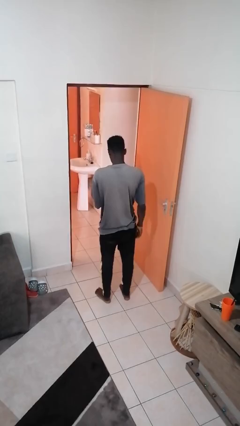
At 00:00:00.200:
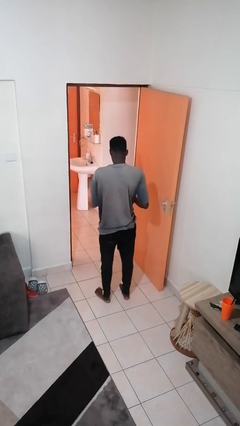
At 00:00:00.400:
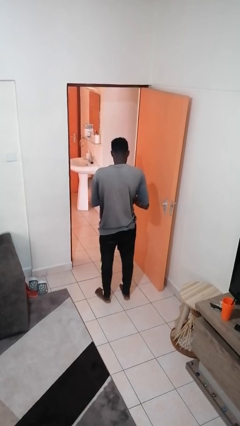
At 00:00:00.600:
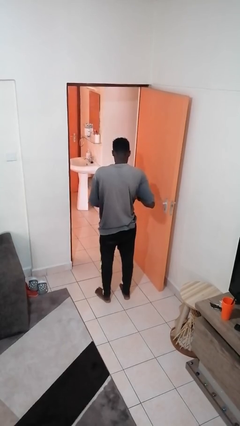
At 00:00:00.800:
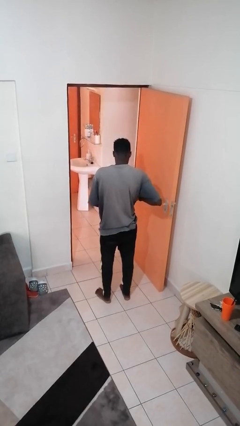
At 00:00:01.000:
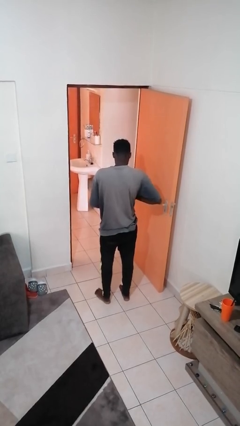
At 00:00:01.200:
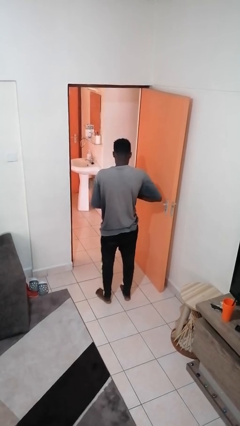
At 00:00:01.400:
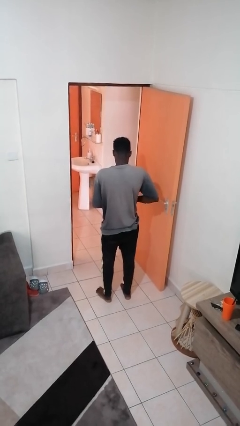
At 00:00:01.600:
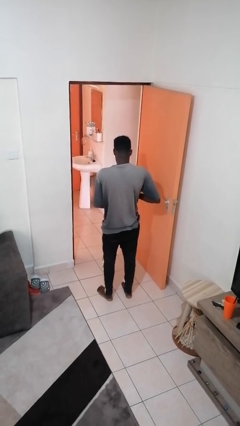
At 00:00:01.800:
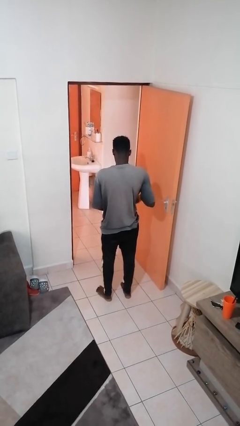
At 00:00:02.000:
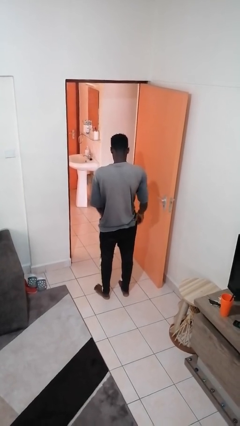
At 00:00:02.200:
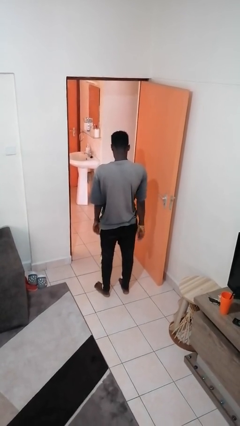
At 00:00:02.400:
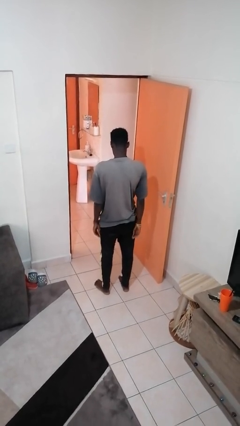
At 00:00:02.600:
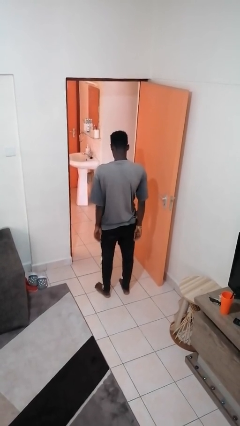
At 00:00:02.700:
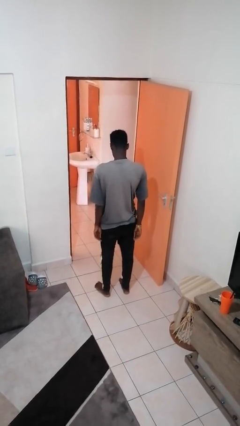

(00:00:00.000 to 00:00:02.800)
person puts phone into pocket

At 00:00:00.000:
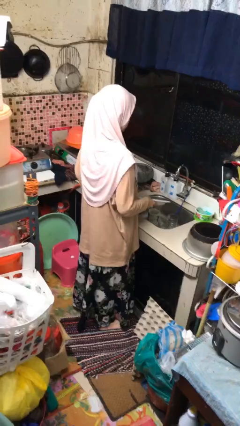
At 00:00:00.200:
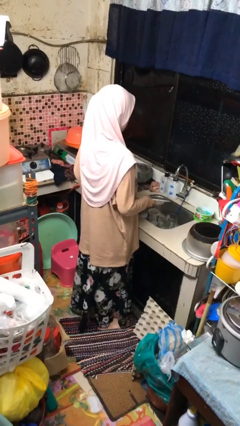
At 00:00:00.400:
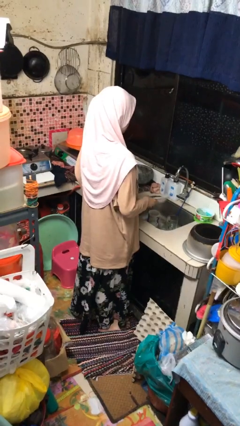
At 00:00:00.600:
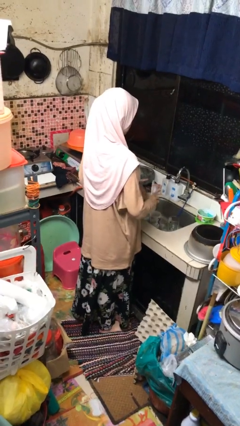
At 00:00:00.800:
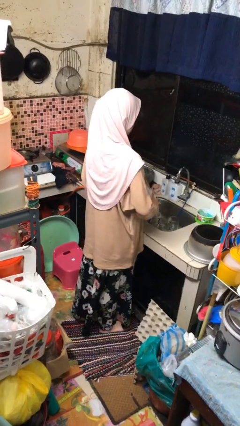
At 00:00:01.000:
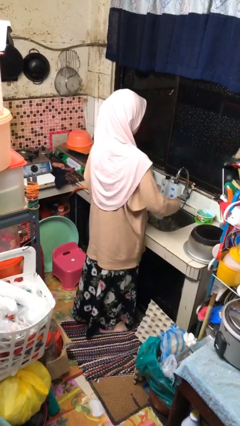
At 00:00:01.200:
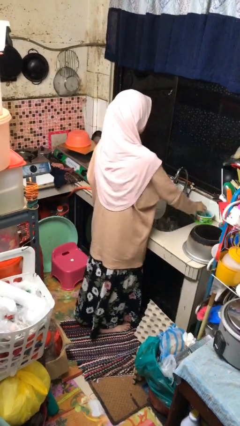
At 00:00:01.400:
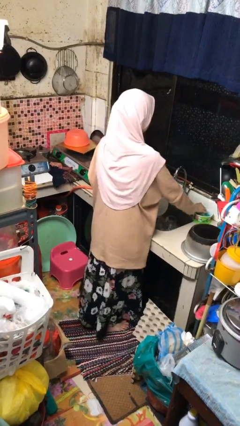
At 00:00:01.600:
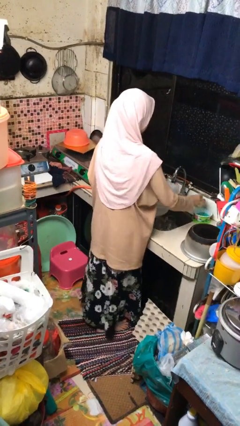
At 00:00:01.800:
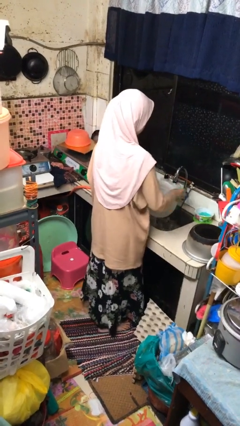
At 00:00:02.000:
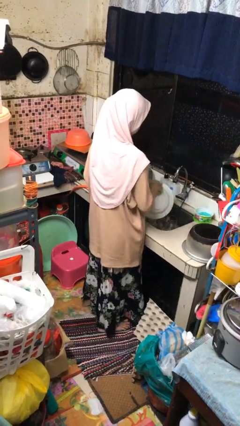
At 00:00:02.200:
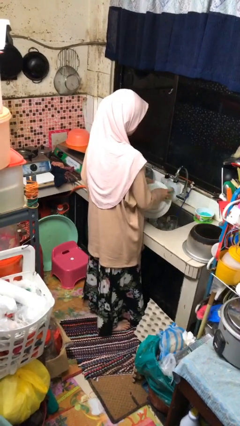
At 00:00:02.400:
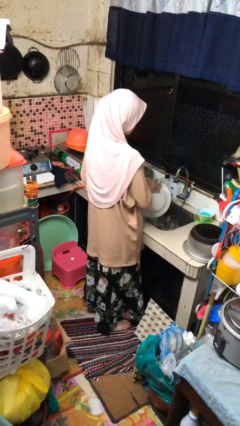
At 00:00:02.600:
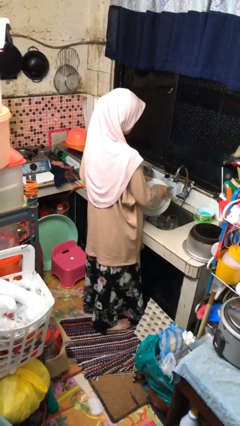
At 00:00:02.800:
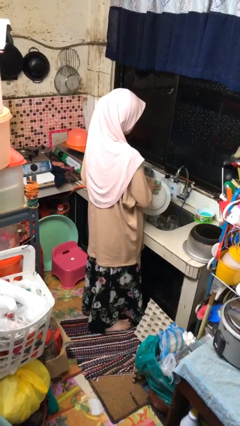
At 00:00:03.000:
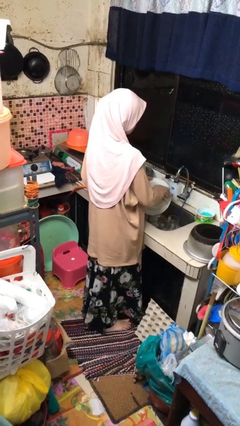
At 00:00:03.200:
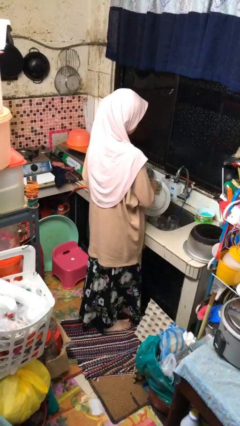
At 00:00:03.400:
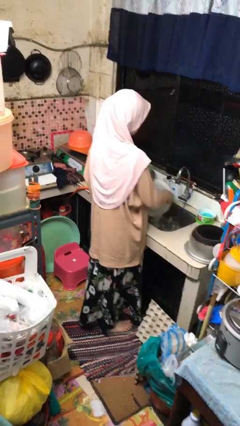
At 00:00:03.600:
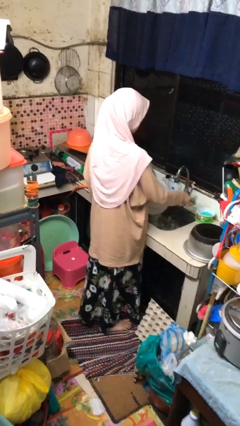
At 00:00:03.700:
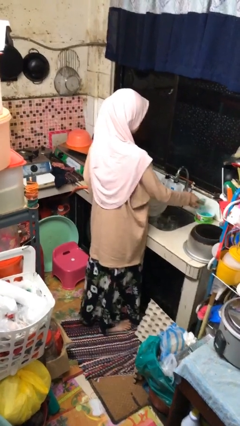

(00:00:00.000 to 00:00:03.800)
person washes dish

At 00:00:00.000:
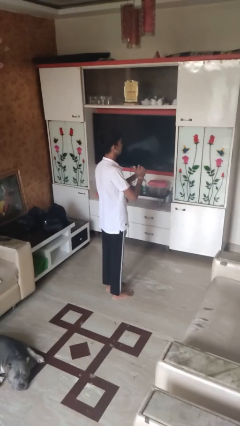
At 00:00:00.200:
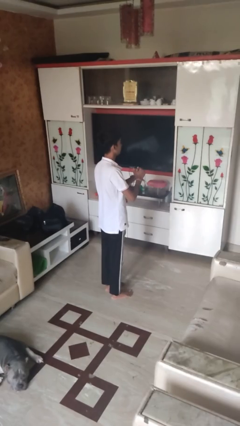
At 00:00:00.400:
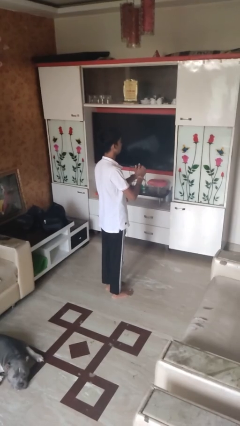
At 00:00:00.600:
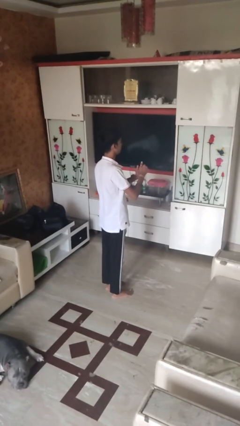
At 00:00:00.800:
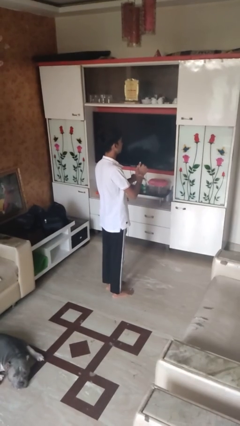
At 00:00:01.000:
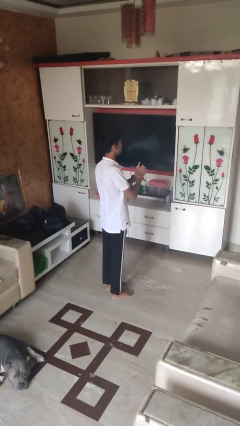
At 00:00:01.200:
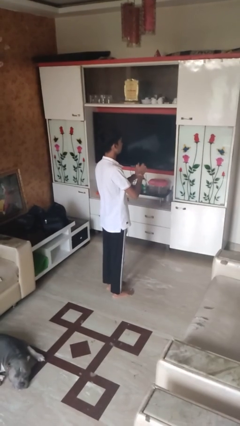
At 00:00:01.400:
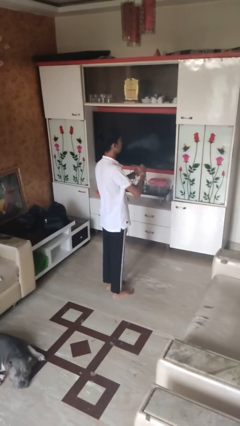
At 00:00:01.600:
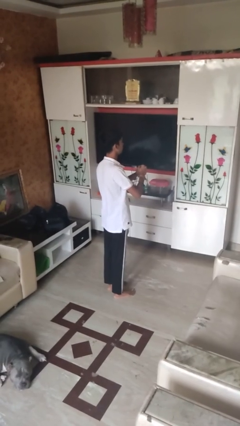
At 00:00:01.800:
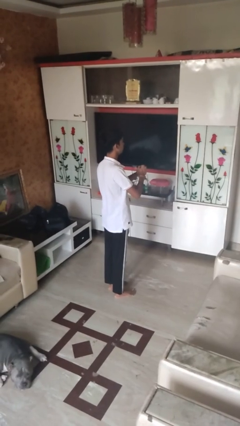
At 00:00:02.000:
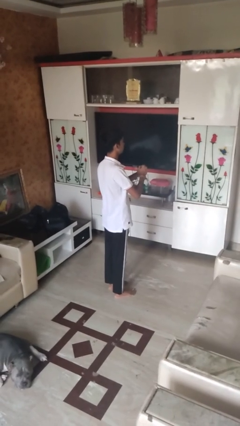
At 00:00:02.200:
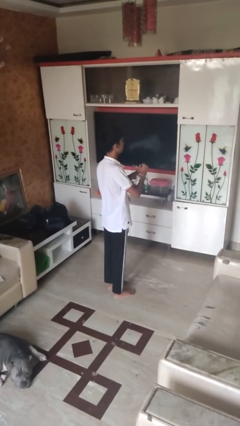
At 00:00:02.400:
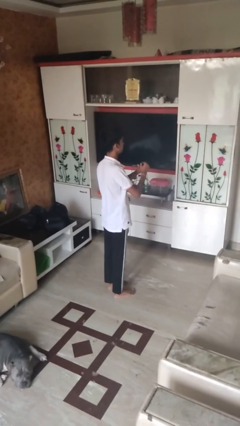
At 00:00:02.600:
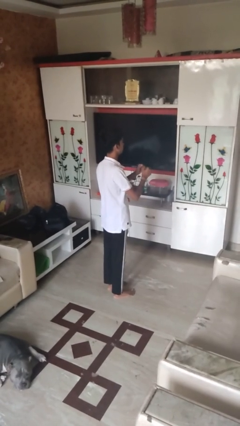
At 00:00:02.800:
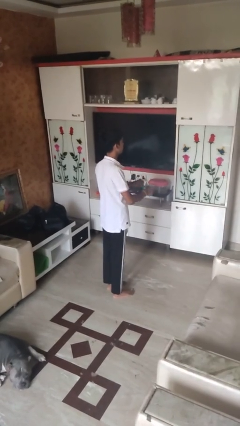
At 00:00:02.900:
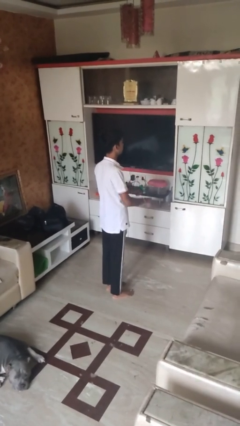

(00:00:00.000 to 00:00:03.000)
person cracks knuckles

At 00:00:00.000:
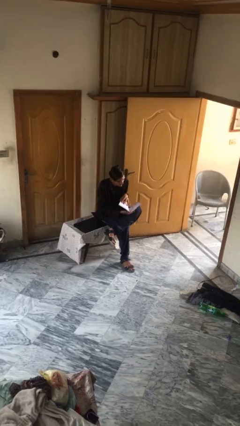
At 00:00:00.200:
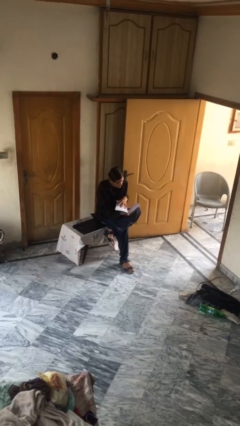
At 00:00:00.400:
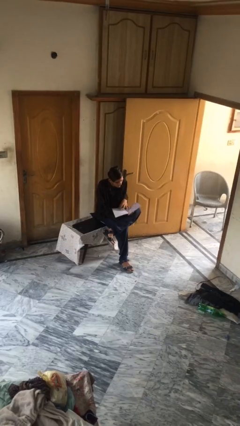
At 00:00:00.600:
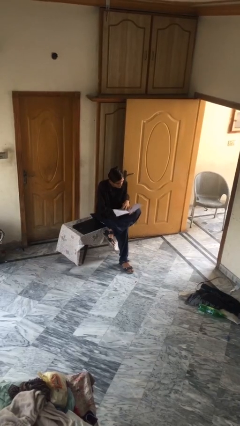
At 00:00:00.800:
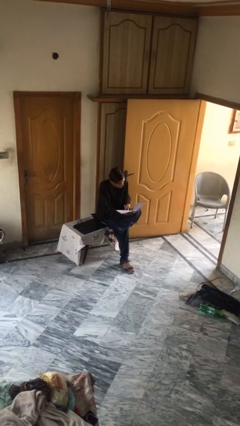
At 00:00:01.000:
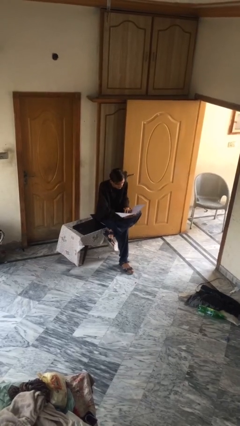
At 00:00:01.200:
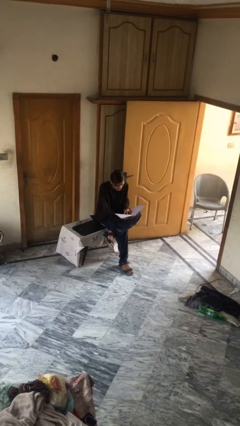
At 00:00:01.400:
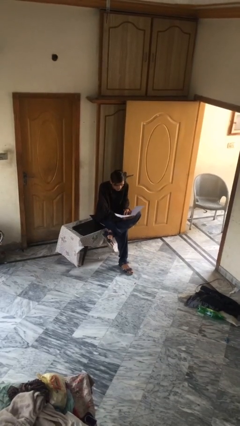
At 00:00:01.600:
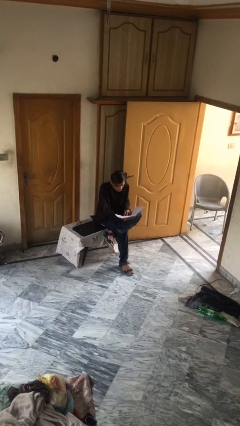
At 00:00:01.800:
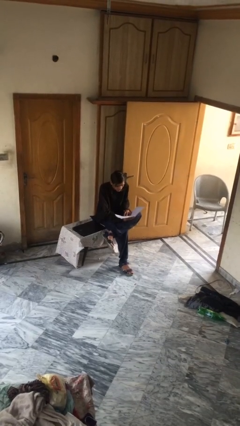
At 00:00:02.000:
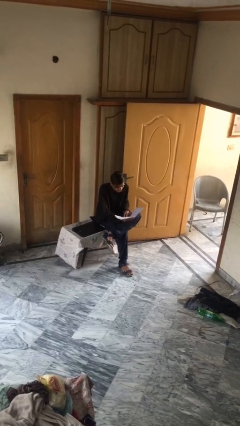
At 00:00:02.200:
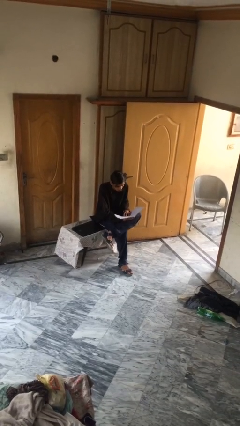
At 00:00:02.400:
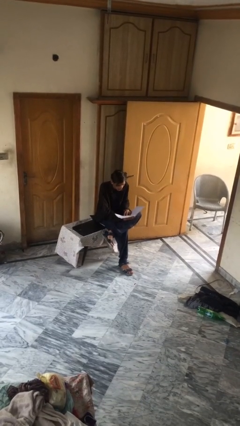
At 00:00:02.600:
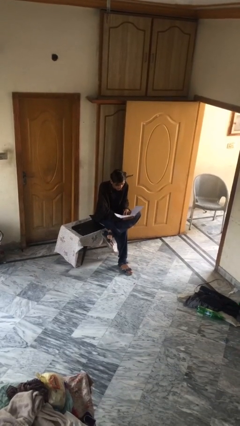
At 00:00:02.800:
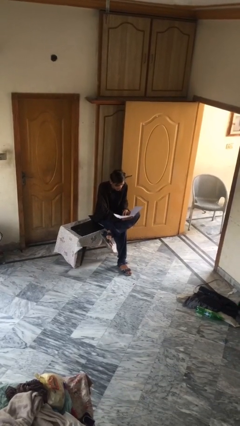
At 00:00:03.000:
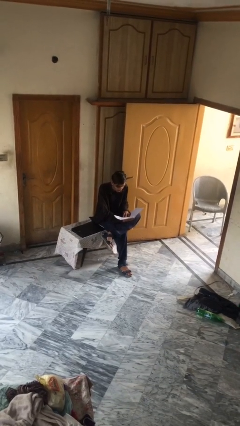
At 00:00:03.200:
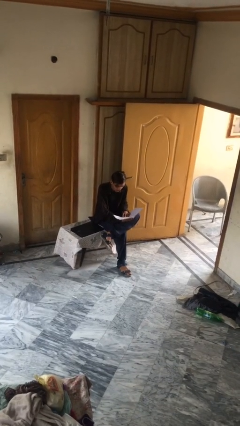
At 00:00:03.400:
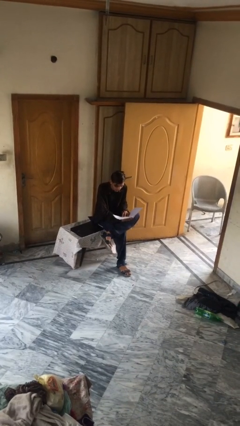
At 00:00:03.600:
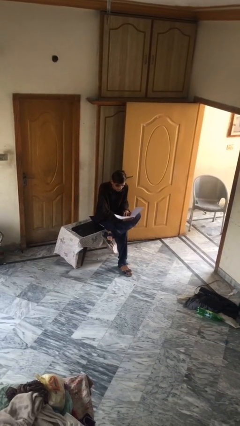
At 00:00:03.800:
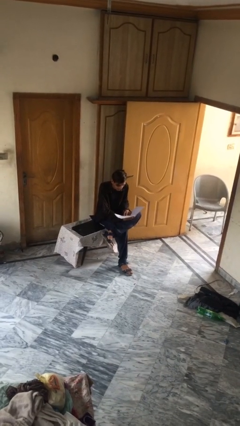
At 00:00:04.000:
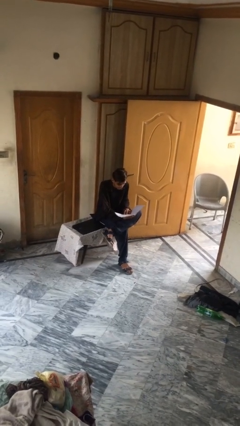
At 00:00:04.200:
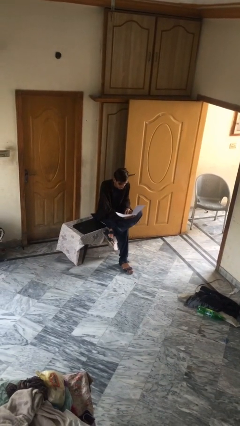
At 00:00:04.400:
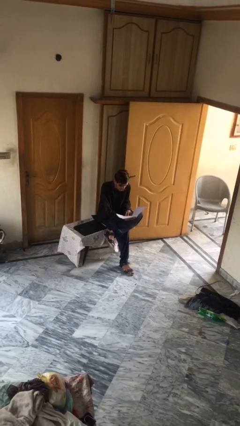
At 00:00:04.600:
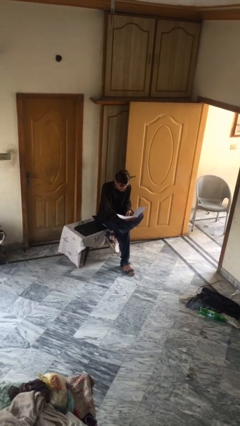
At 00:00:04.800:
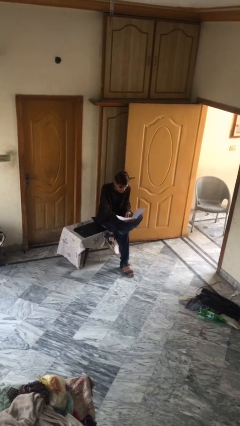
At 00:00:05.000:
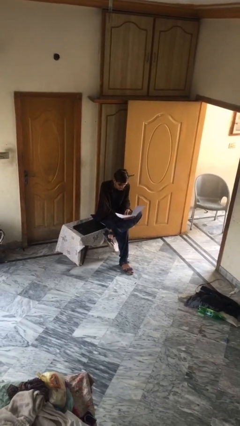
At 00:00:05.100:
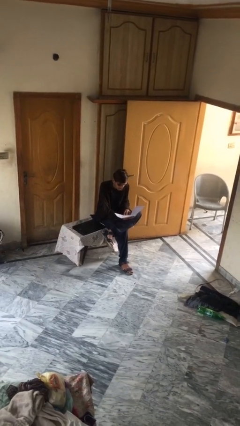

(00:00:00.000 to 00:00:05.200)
person reads document

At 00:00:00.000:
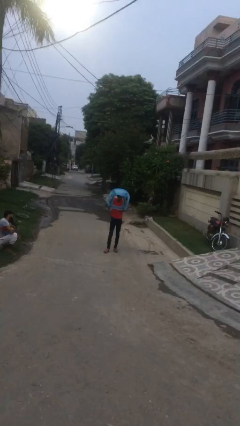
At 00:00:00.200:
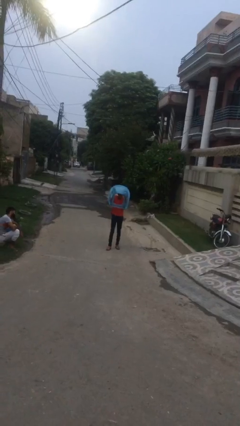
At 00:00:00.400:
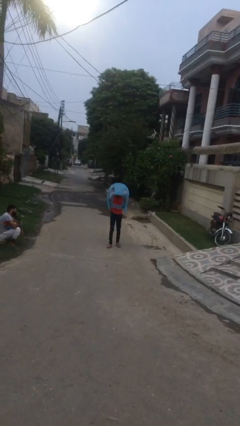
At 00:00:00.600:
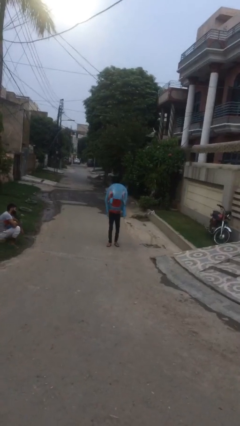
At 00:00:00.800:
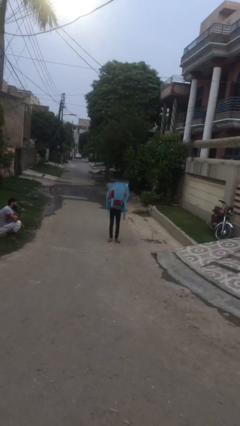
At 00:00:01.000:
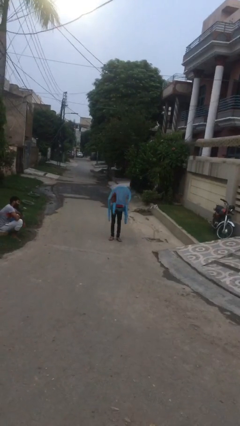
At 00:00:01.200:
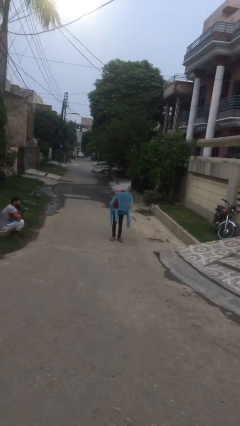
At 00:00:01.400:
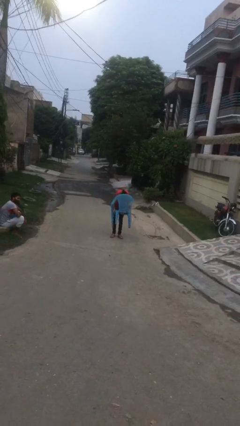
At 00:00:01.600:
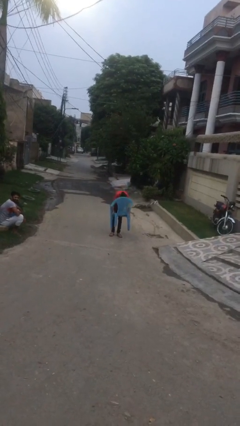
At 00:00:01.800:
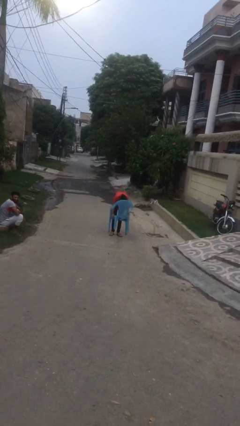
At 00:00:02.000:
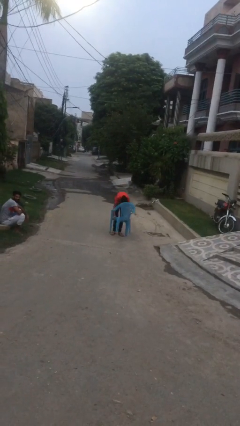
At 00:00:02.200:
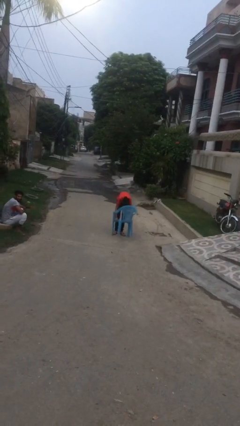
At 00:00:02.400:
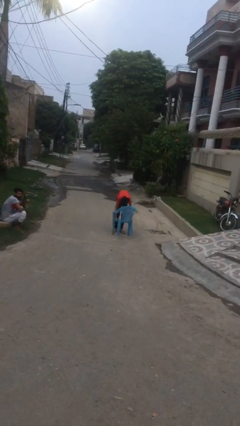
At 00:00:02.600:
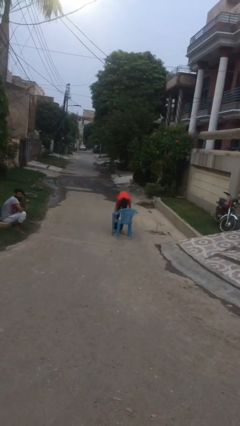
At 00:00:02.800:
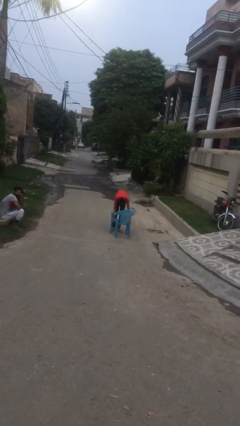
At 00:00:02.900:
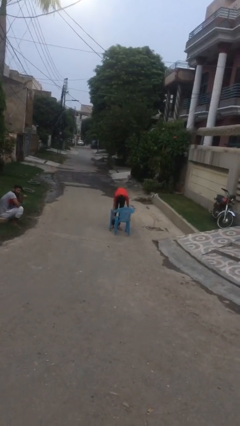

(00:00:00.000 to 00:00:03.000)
person puts down object on floor
